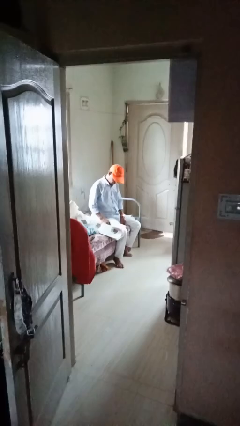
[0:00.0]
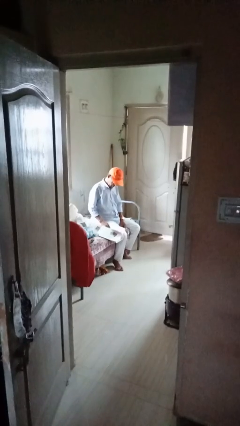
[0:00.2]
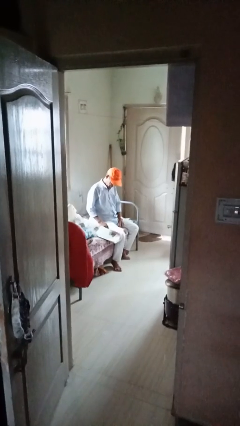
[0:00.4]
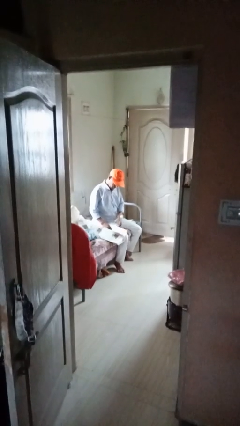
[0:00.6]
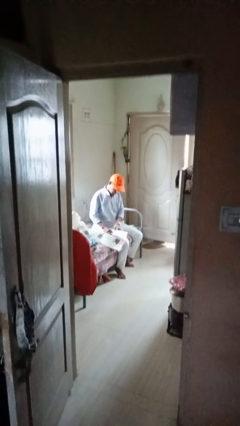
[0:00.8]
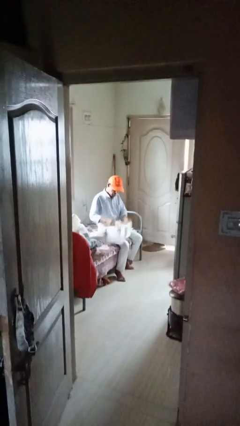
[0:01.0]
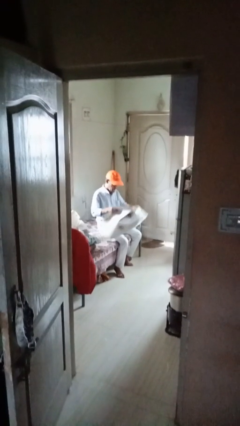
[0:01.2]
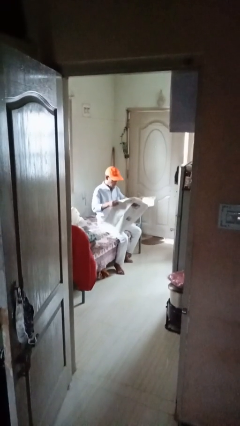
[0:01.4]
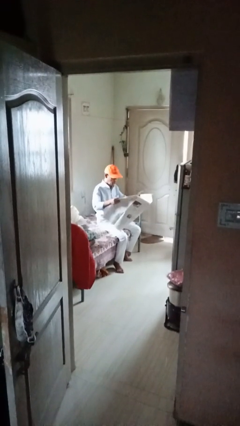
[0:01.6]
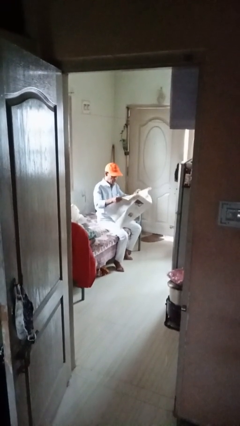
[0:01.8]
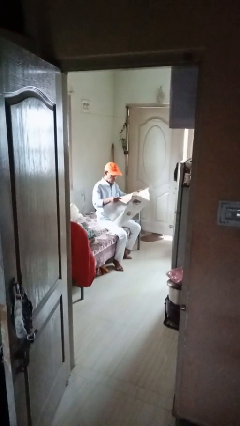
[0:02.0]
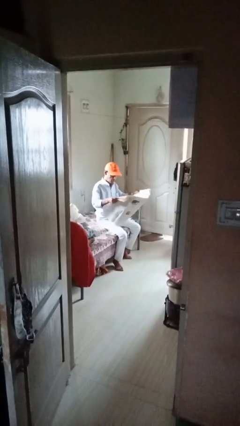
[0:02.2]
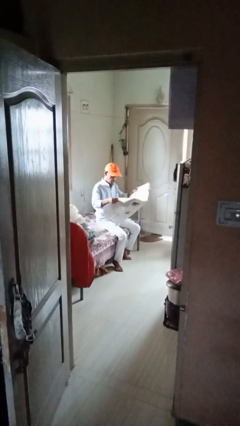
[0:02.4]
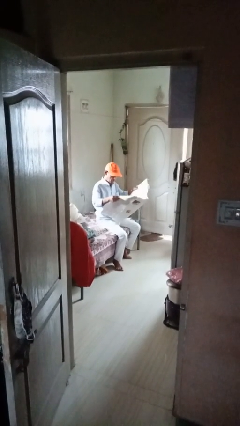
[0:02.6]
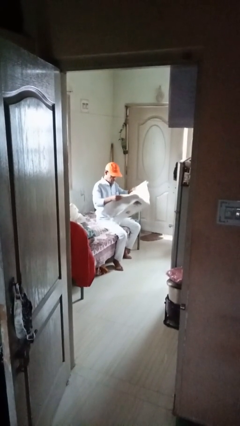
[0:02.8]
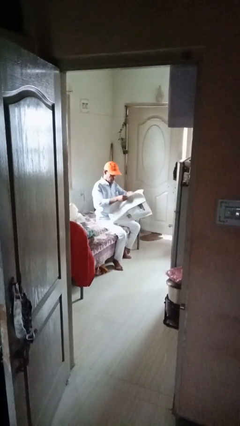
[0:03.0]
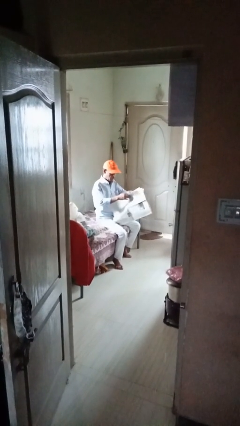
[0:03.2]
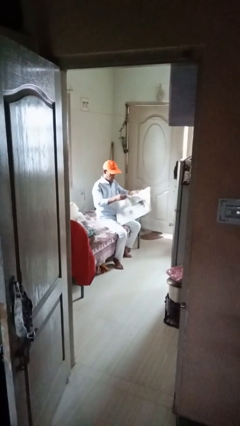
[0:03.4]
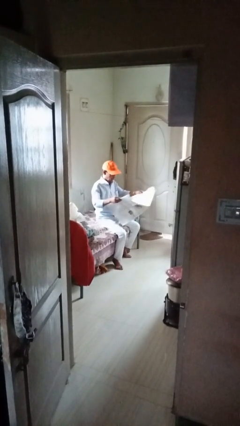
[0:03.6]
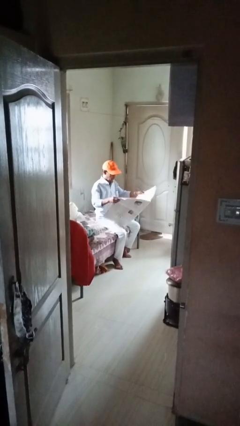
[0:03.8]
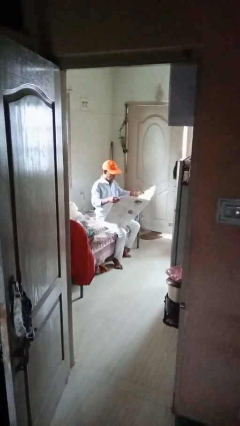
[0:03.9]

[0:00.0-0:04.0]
person reads newspaper

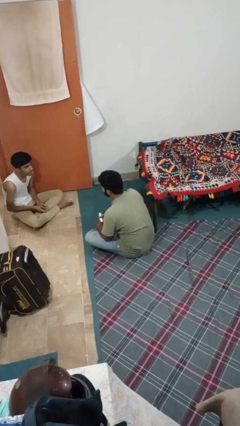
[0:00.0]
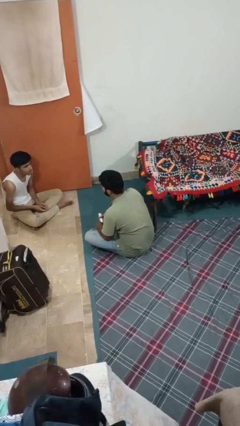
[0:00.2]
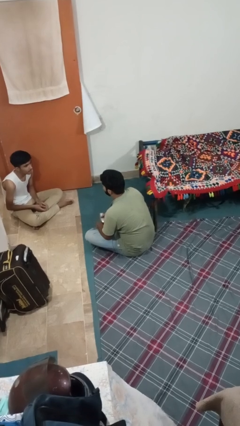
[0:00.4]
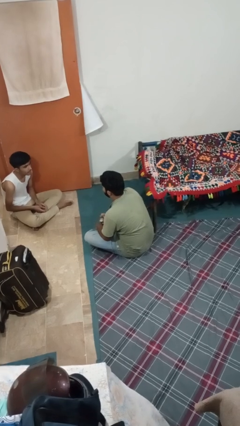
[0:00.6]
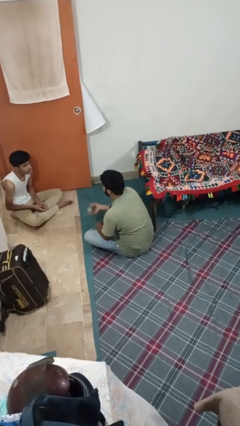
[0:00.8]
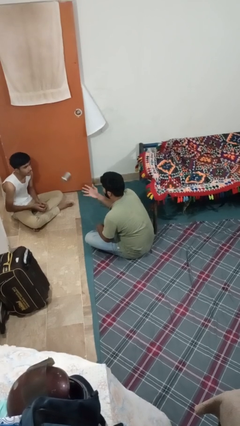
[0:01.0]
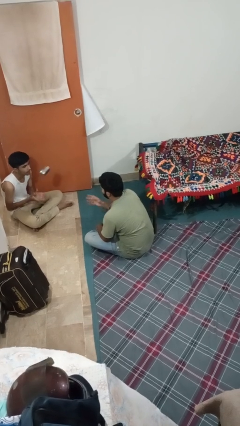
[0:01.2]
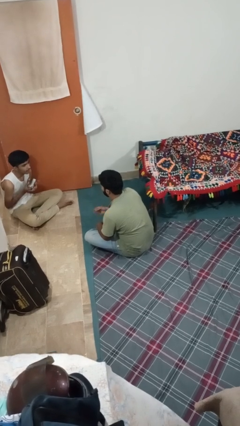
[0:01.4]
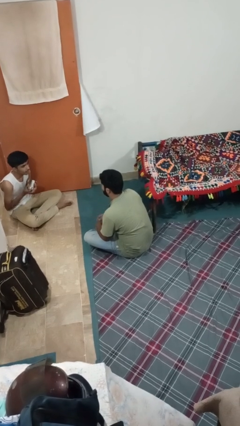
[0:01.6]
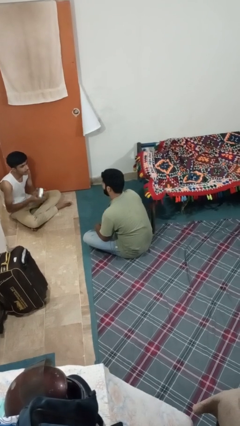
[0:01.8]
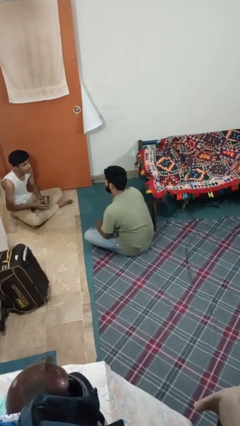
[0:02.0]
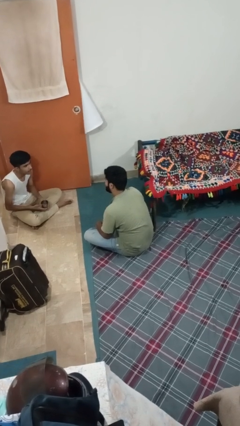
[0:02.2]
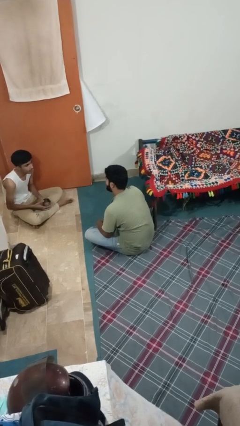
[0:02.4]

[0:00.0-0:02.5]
person throws object to person

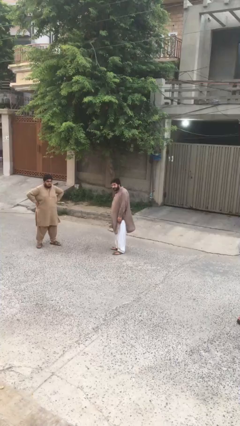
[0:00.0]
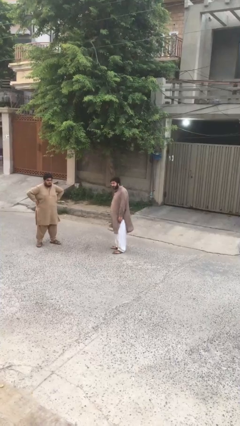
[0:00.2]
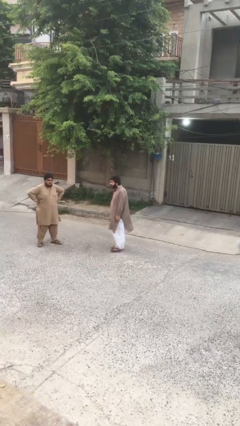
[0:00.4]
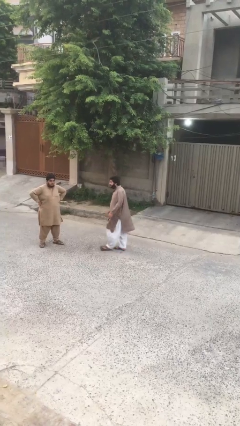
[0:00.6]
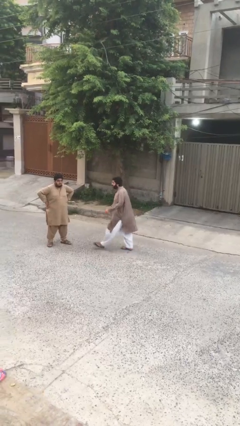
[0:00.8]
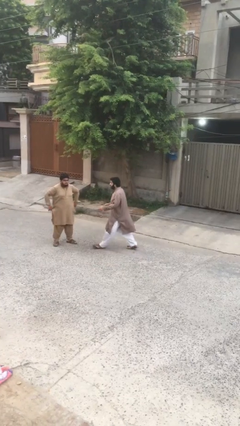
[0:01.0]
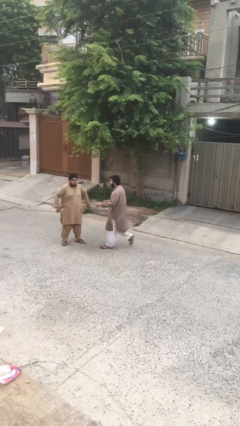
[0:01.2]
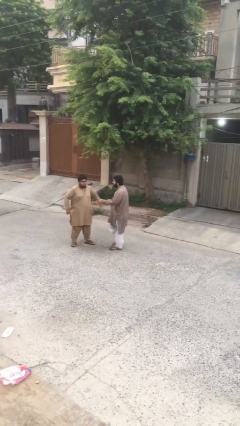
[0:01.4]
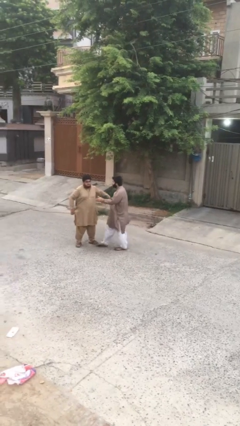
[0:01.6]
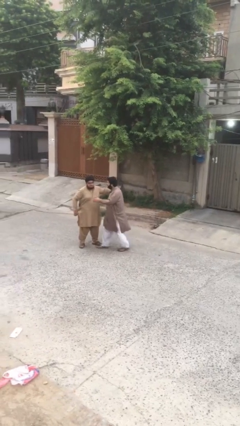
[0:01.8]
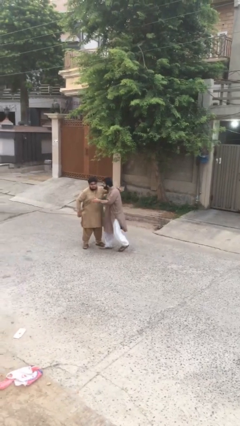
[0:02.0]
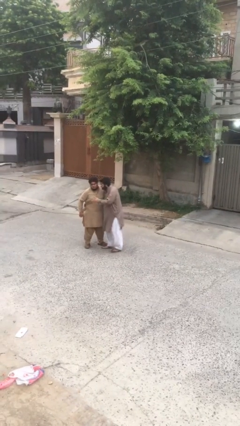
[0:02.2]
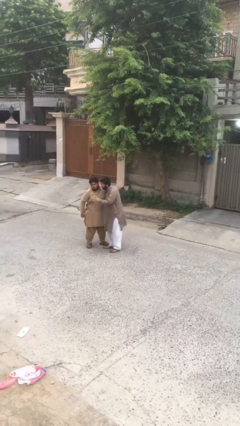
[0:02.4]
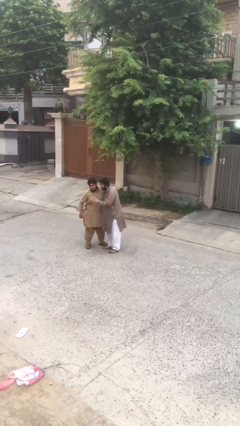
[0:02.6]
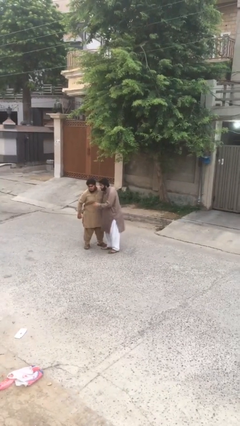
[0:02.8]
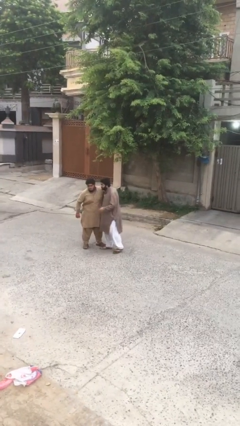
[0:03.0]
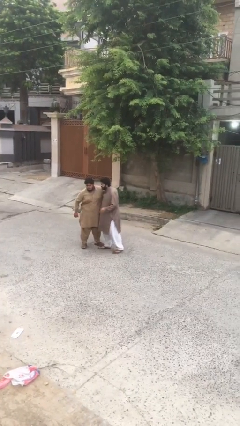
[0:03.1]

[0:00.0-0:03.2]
person embraces person

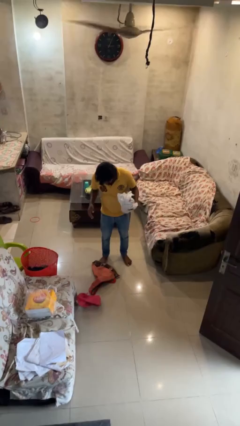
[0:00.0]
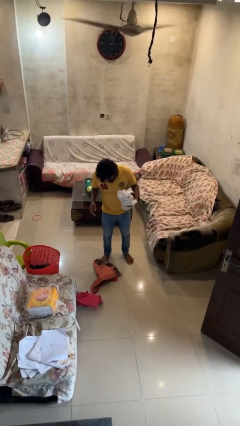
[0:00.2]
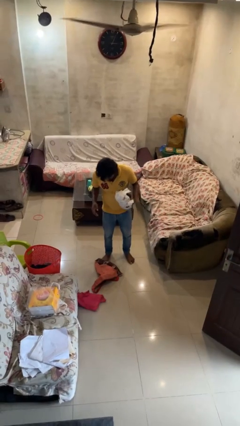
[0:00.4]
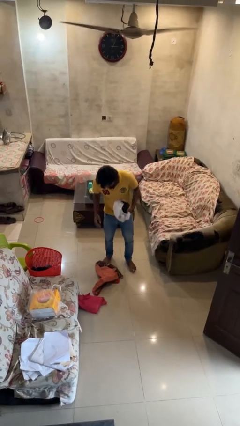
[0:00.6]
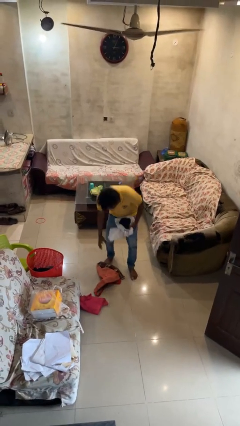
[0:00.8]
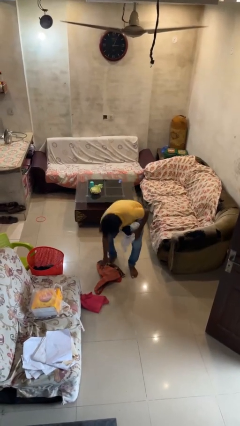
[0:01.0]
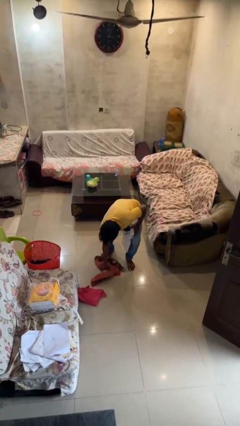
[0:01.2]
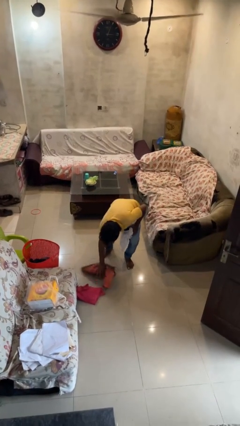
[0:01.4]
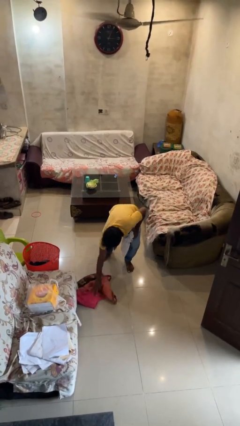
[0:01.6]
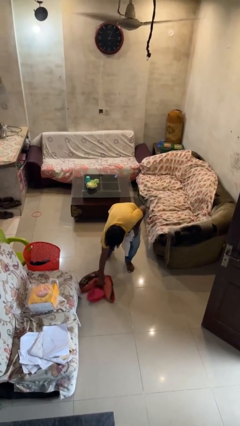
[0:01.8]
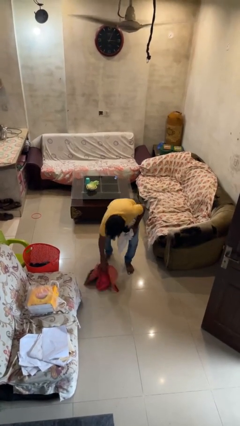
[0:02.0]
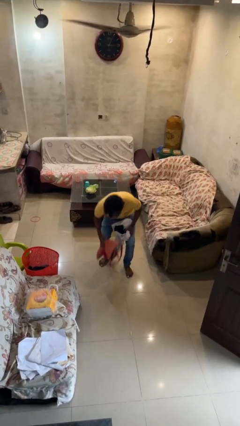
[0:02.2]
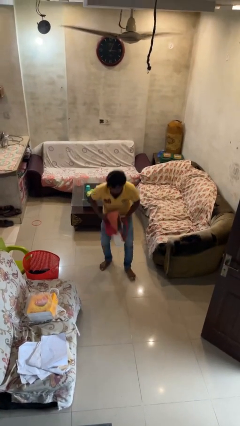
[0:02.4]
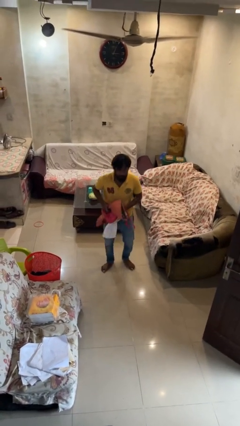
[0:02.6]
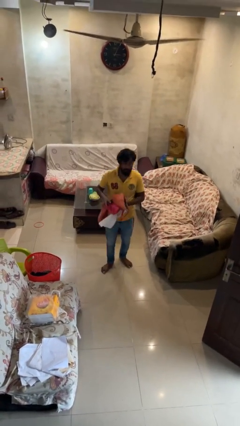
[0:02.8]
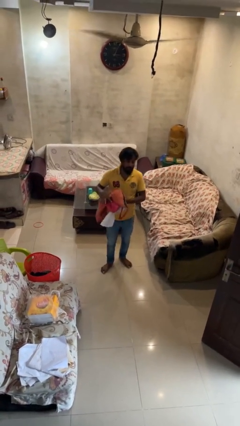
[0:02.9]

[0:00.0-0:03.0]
person picks up object from floor

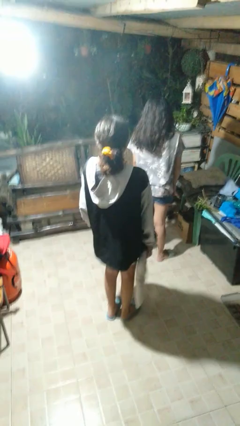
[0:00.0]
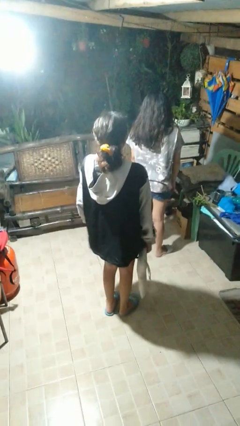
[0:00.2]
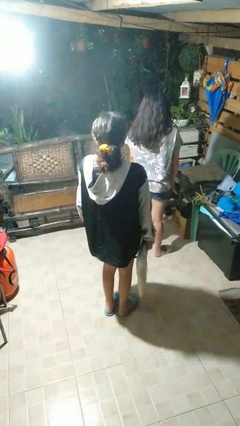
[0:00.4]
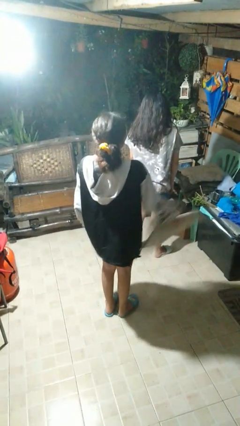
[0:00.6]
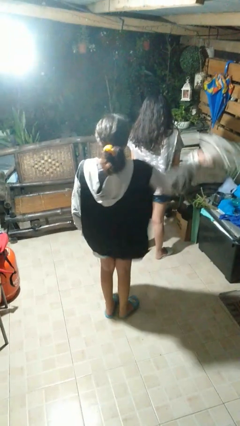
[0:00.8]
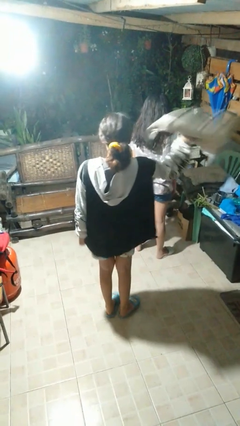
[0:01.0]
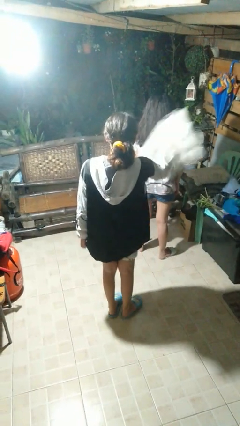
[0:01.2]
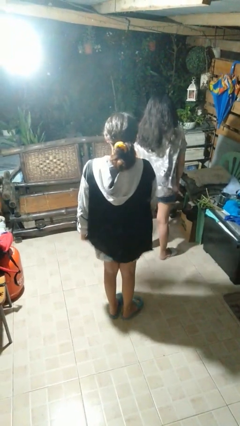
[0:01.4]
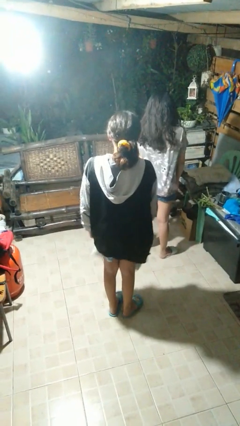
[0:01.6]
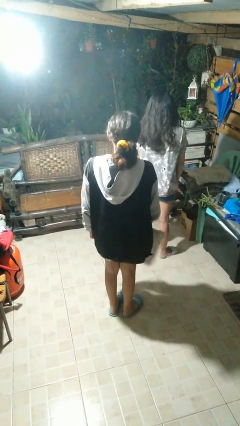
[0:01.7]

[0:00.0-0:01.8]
person hits person with pillow

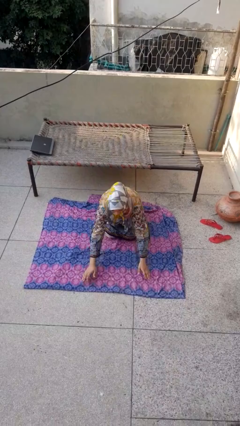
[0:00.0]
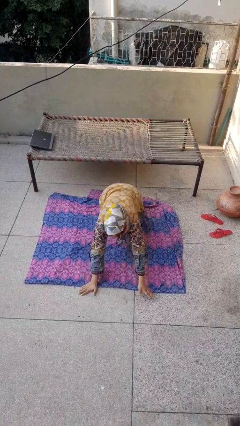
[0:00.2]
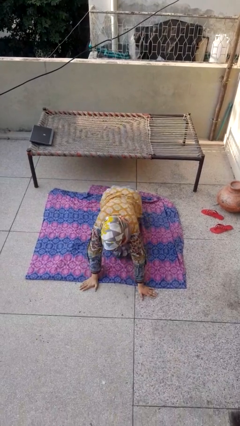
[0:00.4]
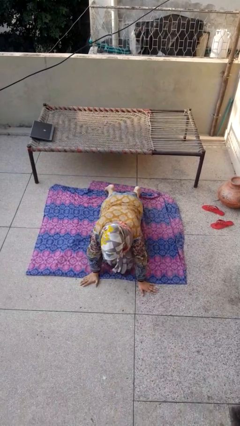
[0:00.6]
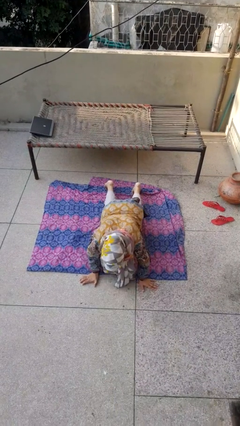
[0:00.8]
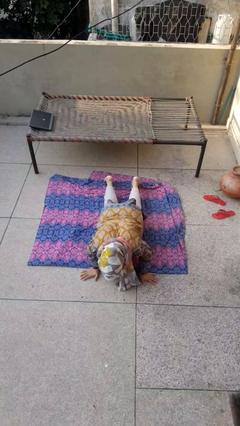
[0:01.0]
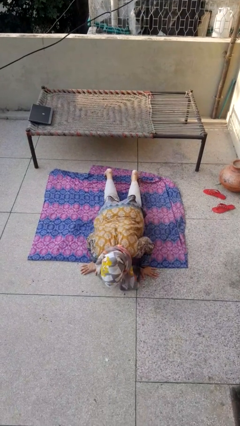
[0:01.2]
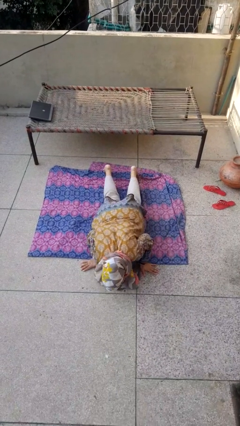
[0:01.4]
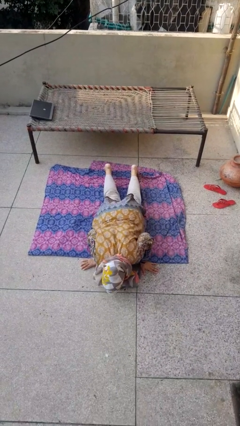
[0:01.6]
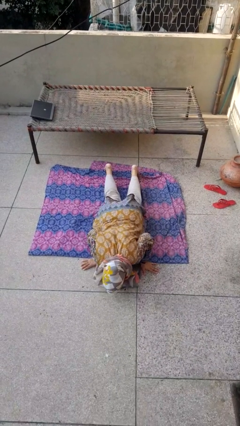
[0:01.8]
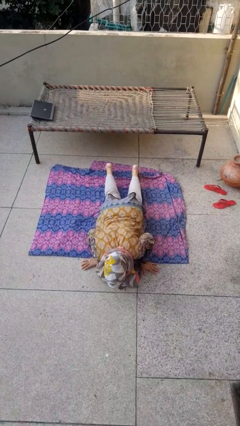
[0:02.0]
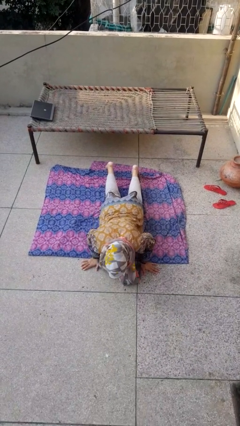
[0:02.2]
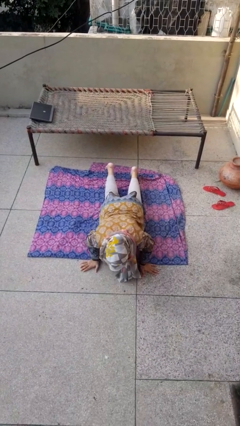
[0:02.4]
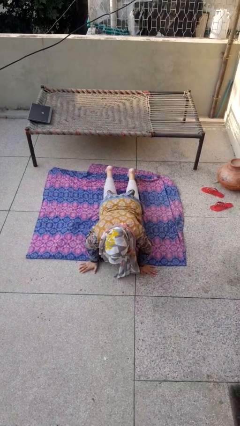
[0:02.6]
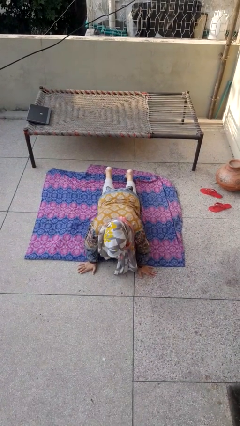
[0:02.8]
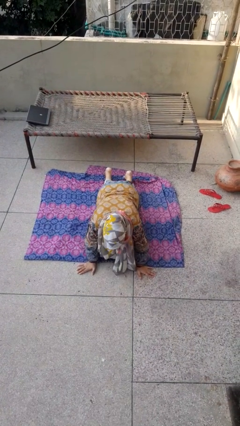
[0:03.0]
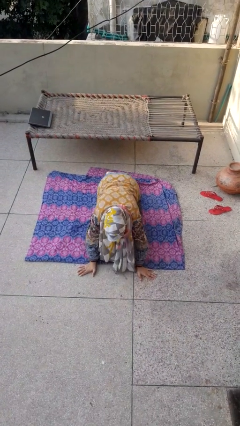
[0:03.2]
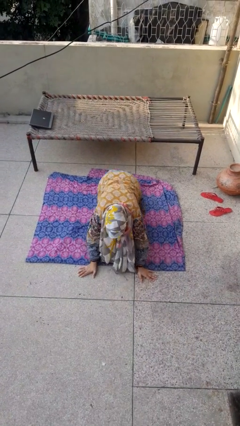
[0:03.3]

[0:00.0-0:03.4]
person exercises with pushup
